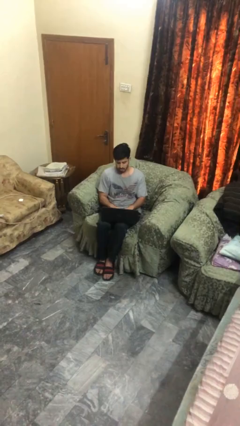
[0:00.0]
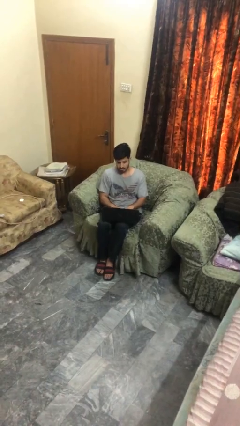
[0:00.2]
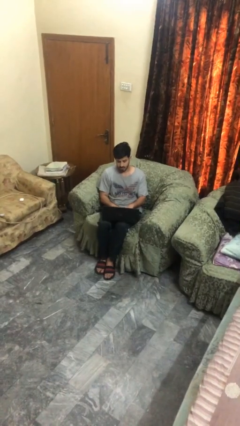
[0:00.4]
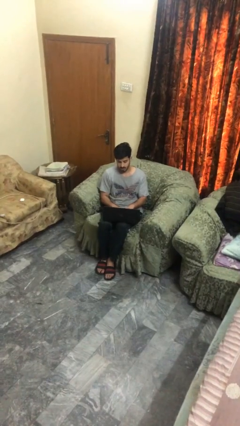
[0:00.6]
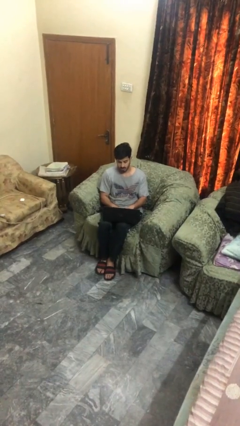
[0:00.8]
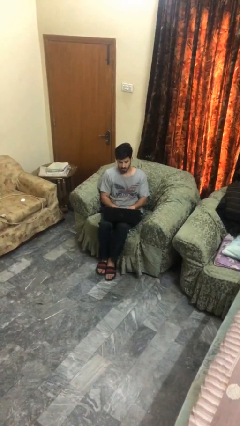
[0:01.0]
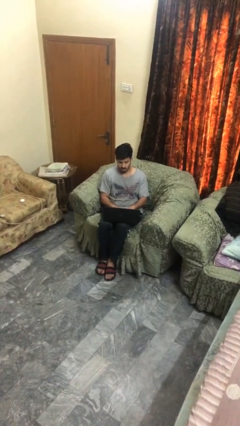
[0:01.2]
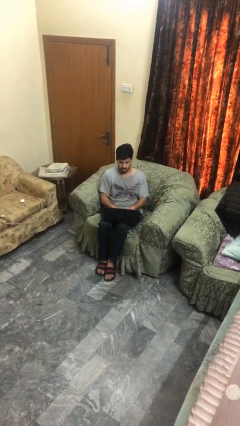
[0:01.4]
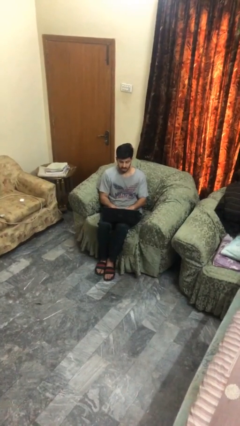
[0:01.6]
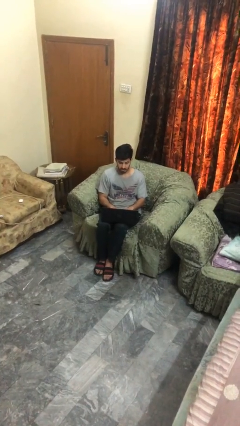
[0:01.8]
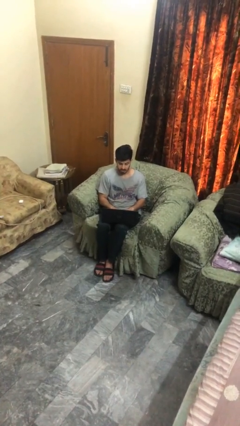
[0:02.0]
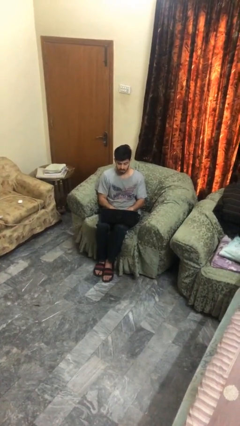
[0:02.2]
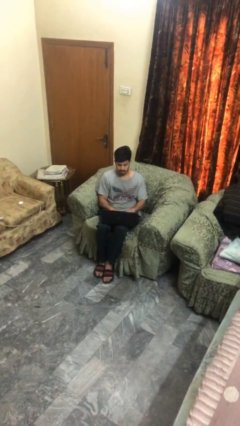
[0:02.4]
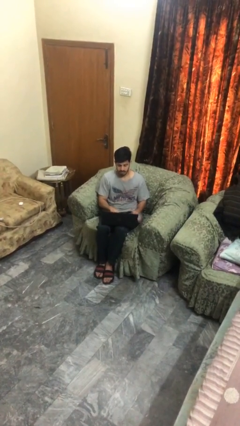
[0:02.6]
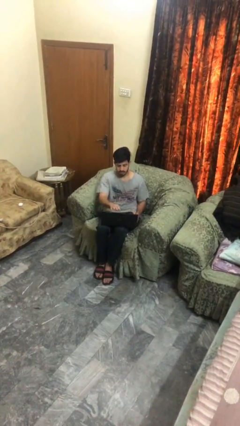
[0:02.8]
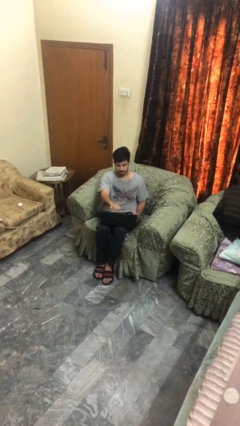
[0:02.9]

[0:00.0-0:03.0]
person interacts with laptop

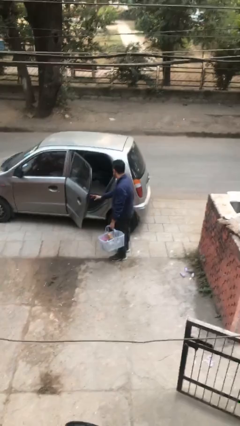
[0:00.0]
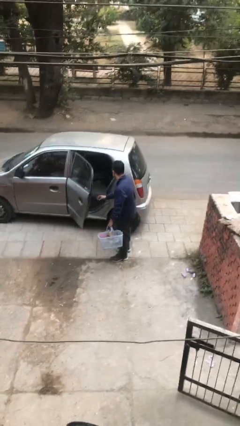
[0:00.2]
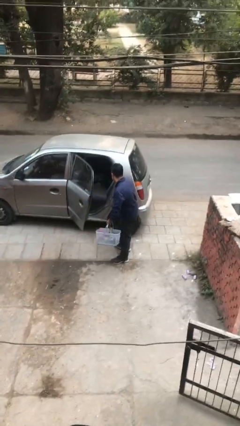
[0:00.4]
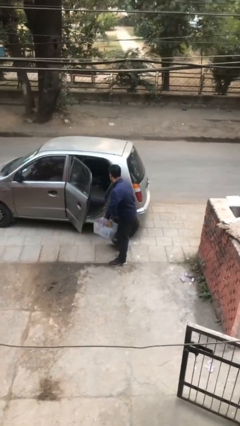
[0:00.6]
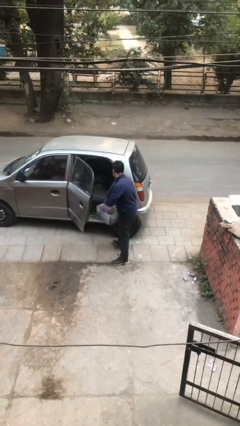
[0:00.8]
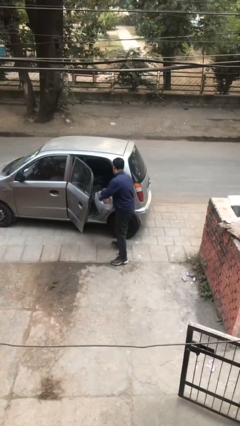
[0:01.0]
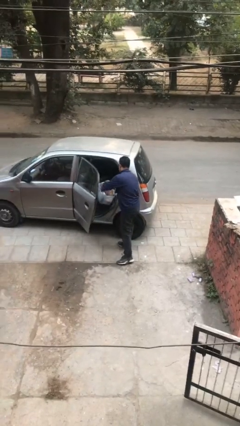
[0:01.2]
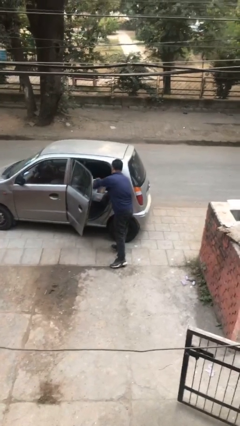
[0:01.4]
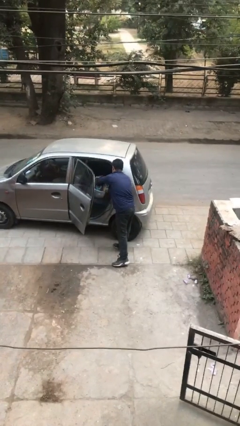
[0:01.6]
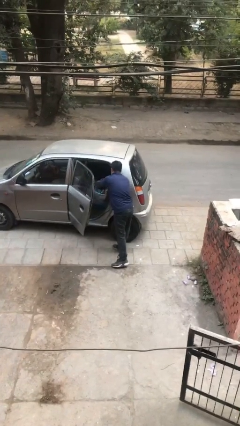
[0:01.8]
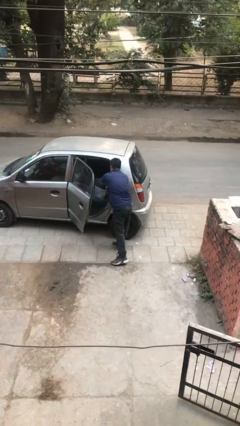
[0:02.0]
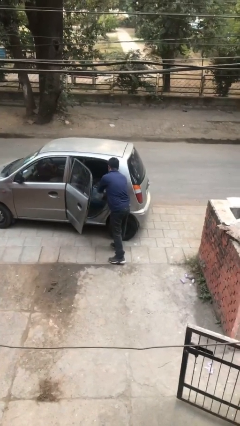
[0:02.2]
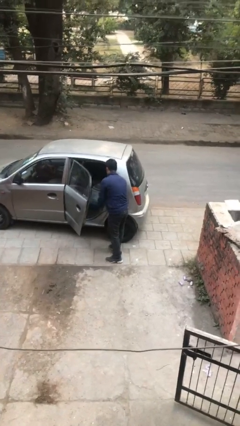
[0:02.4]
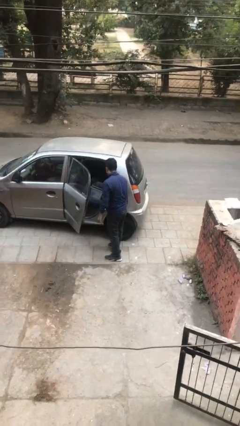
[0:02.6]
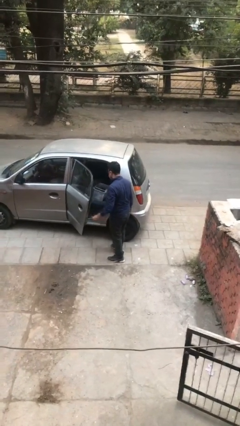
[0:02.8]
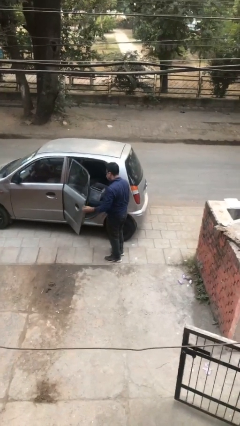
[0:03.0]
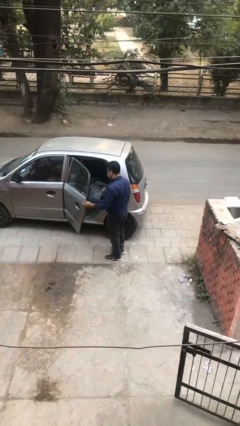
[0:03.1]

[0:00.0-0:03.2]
person loads car

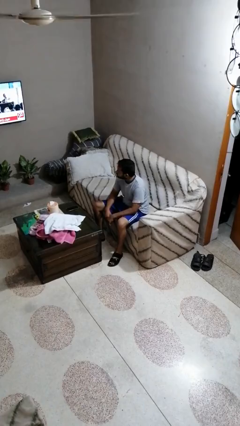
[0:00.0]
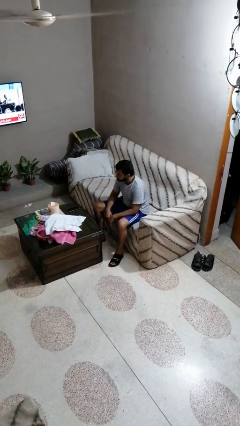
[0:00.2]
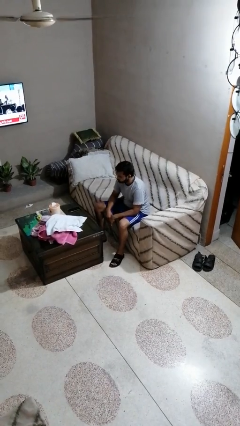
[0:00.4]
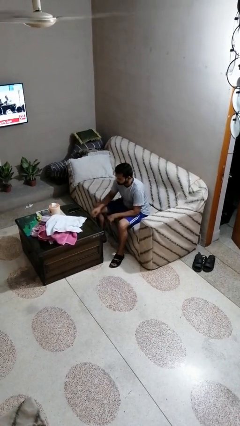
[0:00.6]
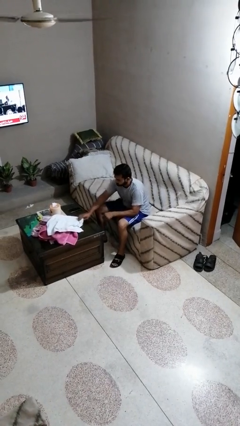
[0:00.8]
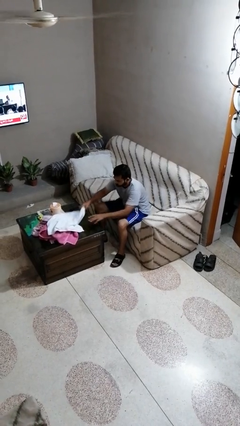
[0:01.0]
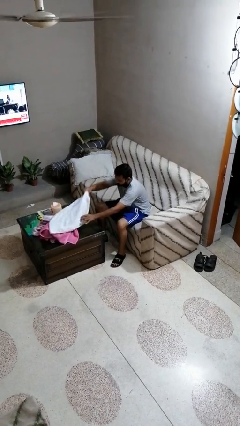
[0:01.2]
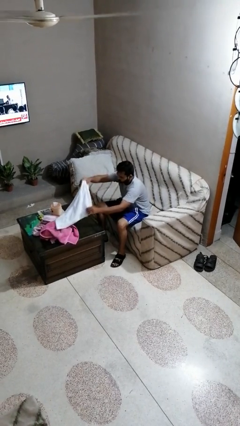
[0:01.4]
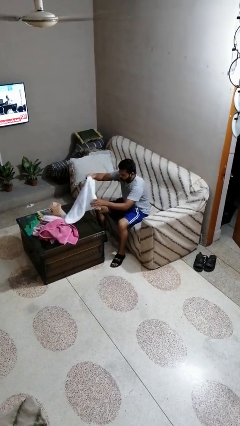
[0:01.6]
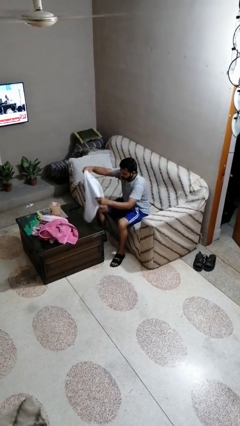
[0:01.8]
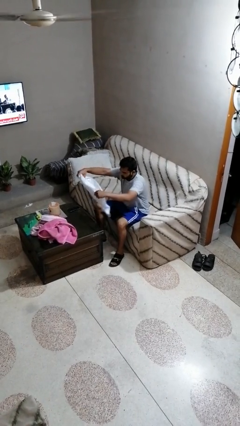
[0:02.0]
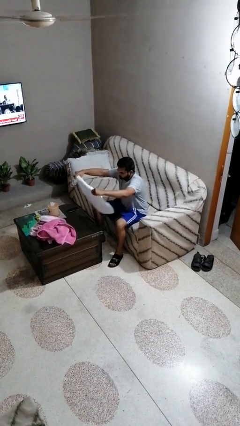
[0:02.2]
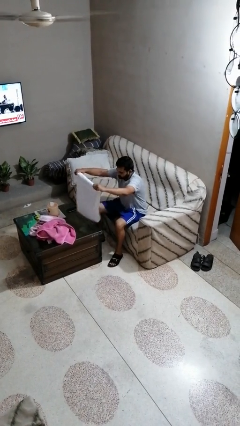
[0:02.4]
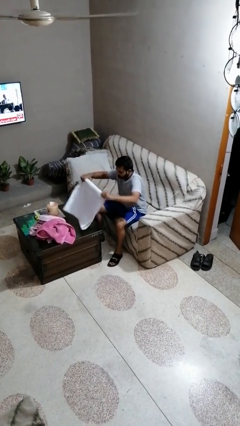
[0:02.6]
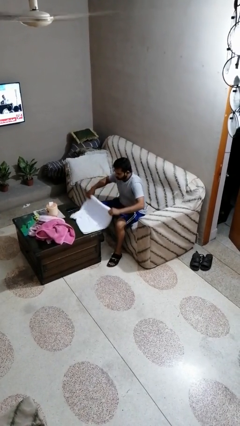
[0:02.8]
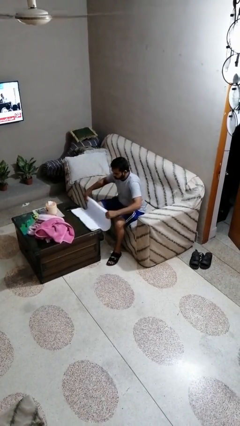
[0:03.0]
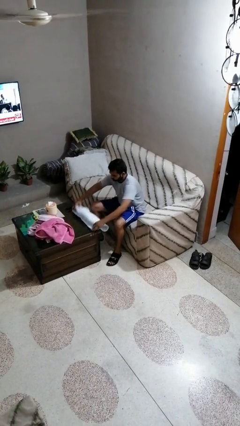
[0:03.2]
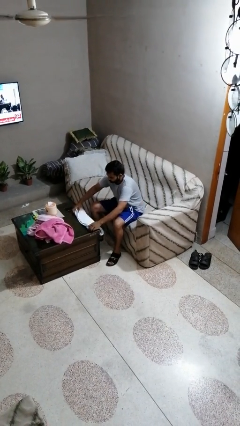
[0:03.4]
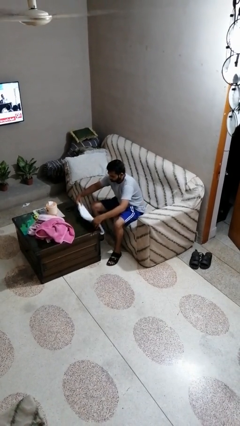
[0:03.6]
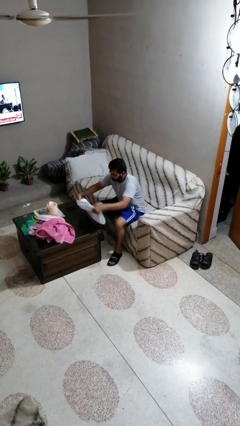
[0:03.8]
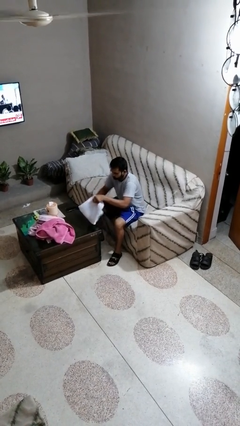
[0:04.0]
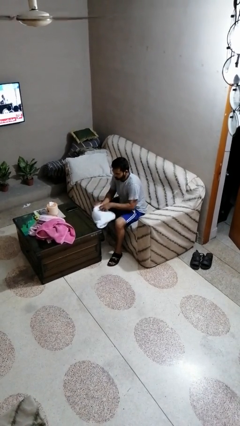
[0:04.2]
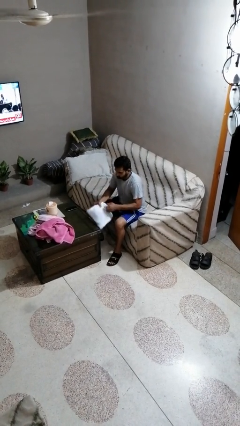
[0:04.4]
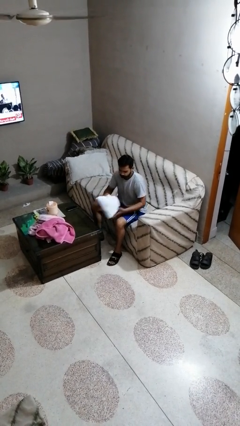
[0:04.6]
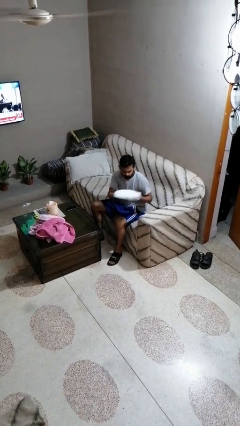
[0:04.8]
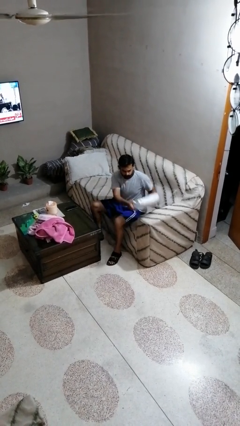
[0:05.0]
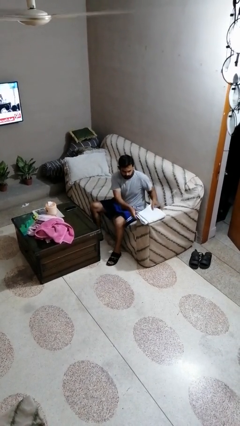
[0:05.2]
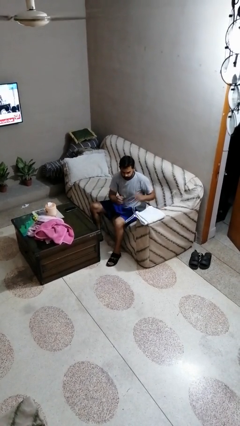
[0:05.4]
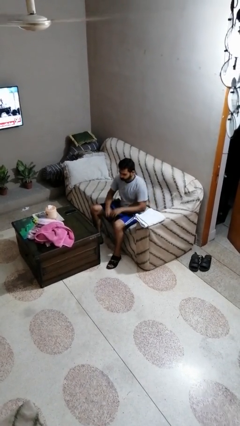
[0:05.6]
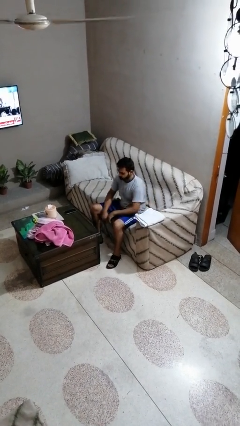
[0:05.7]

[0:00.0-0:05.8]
person folds towel

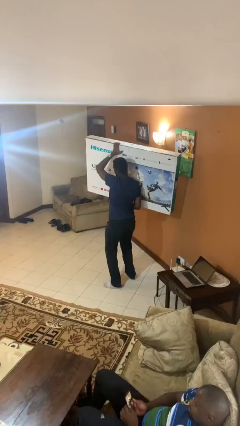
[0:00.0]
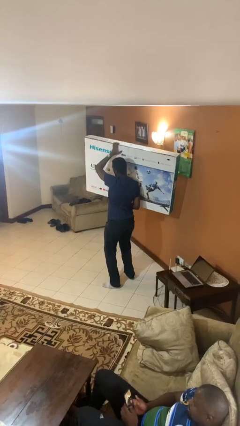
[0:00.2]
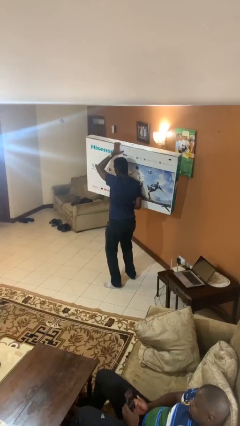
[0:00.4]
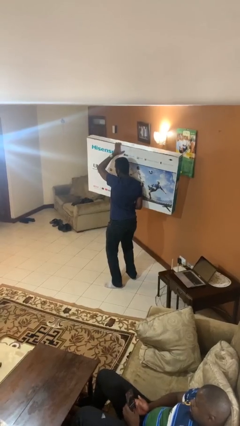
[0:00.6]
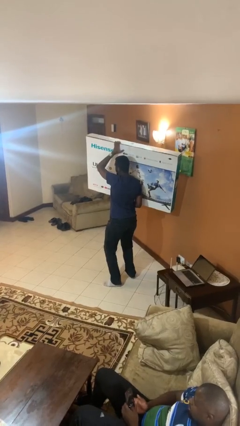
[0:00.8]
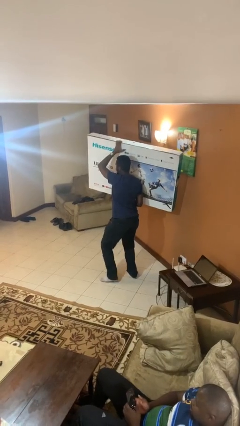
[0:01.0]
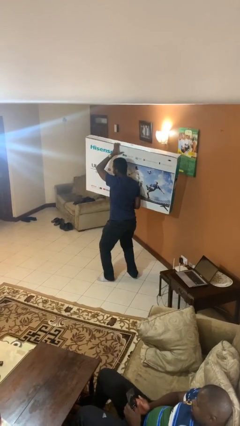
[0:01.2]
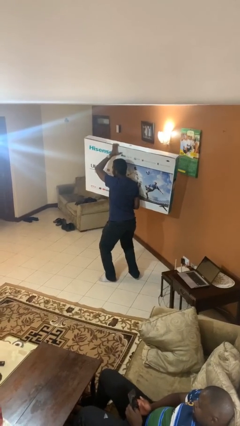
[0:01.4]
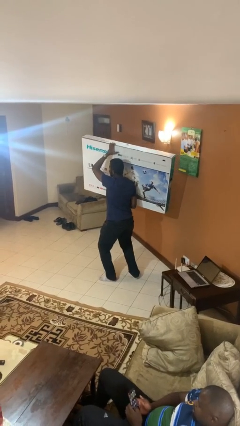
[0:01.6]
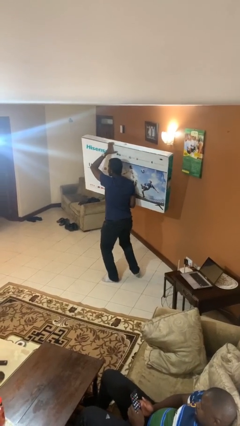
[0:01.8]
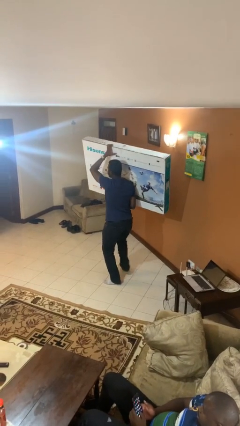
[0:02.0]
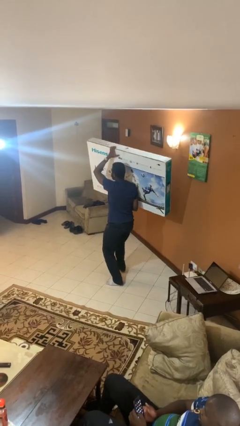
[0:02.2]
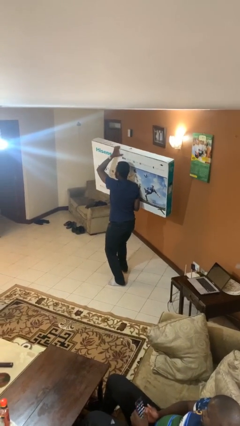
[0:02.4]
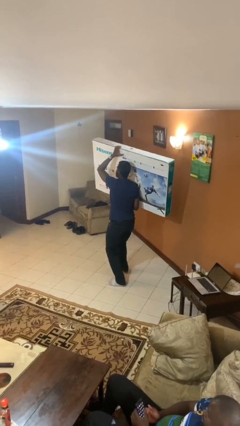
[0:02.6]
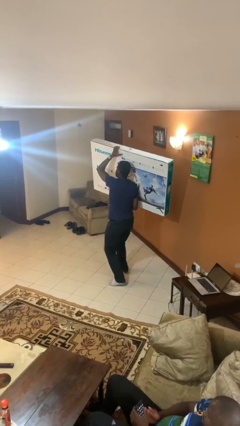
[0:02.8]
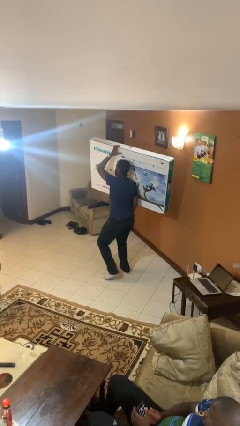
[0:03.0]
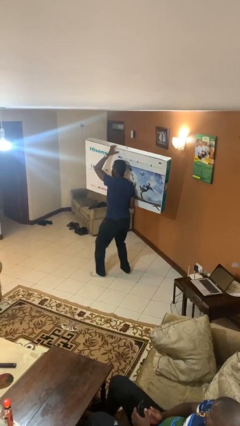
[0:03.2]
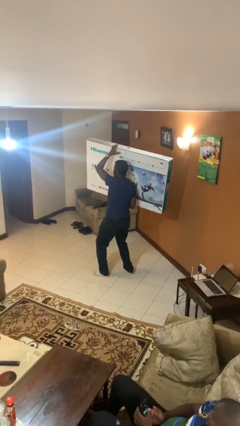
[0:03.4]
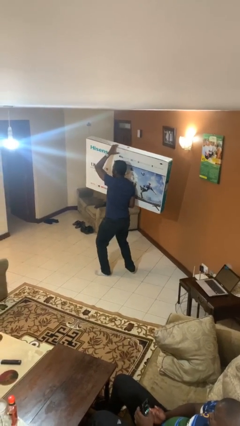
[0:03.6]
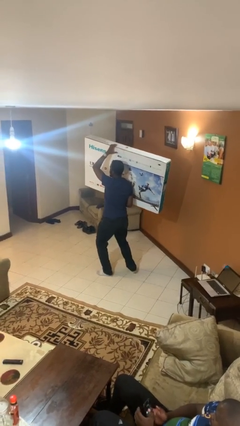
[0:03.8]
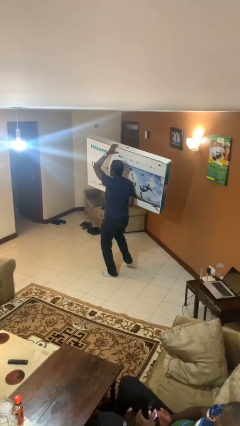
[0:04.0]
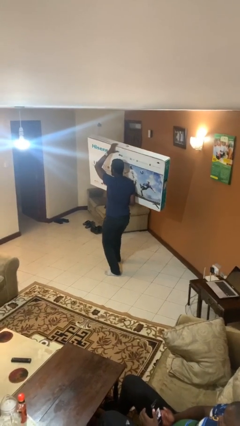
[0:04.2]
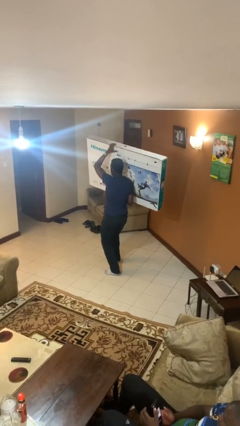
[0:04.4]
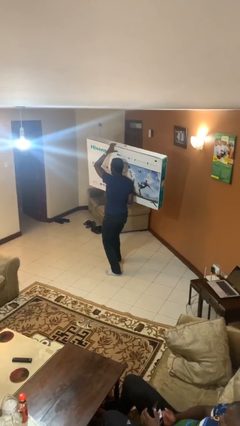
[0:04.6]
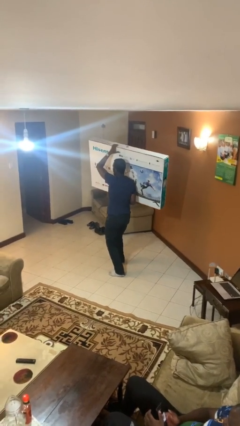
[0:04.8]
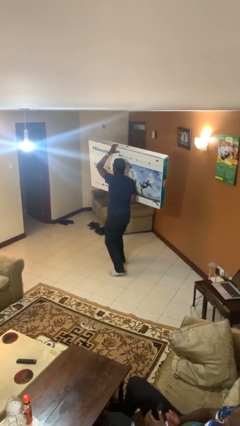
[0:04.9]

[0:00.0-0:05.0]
person carries heavy object

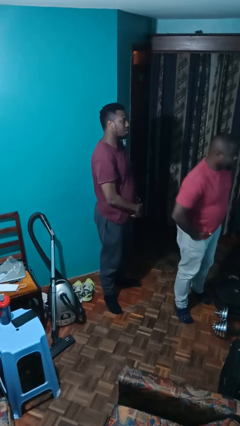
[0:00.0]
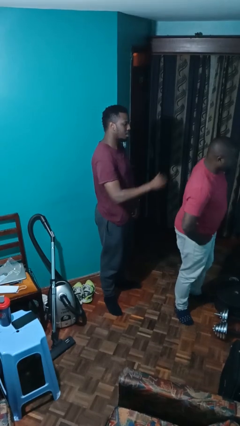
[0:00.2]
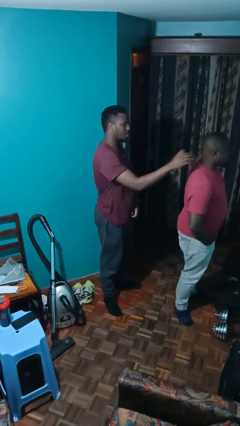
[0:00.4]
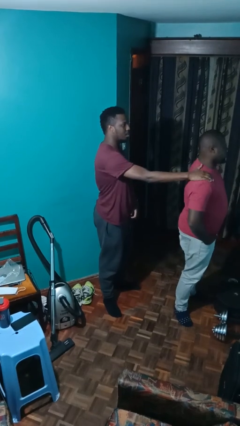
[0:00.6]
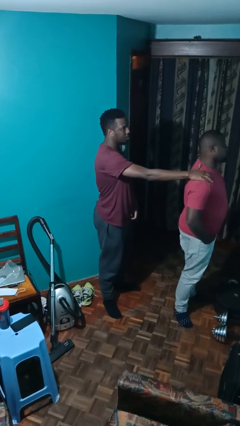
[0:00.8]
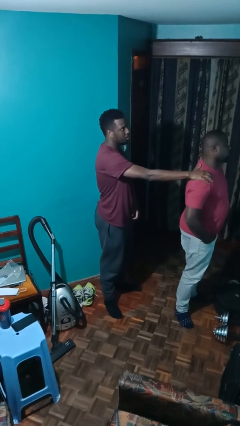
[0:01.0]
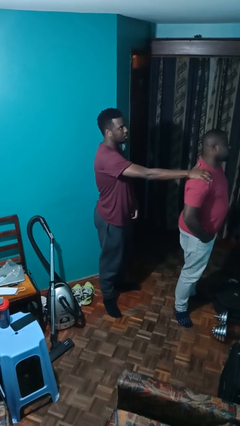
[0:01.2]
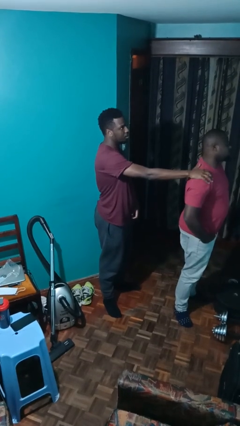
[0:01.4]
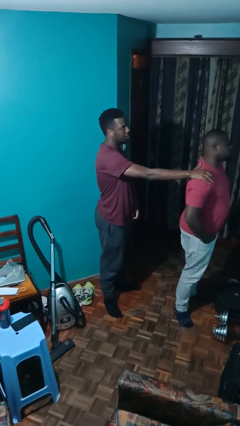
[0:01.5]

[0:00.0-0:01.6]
person grabs person by shoulder
